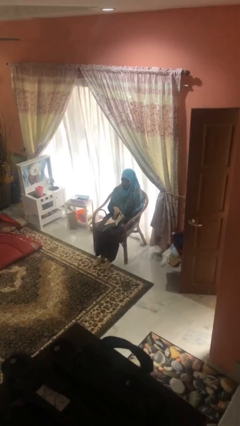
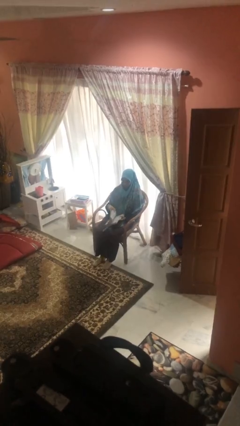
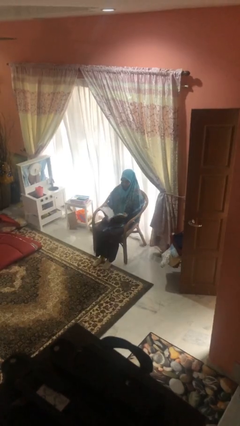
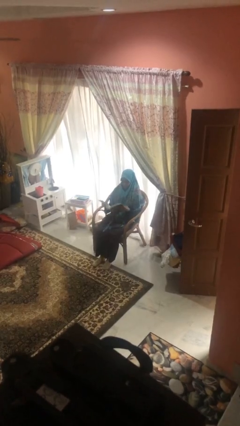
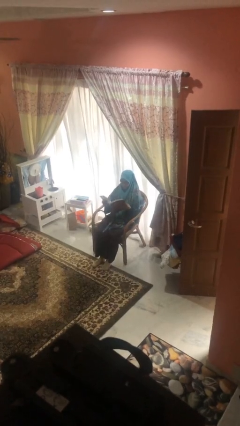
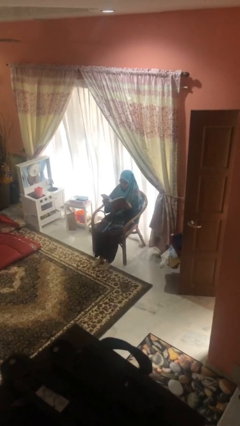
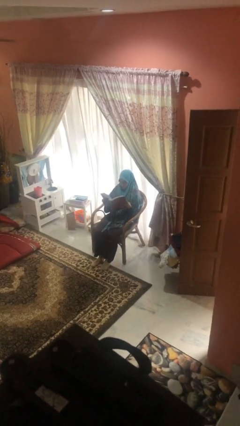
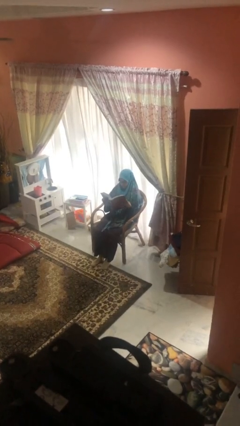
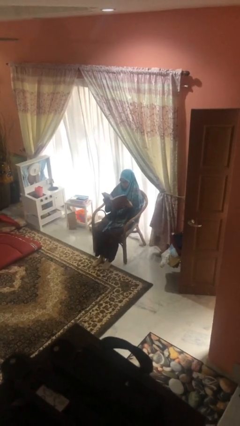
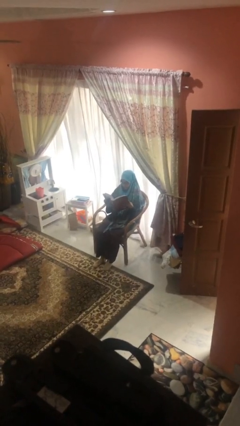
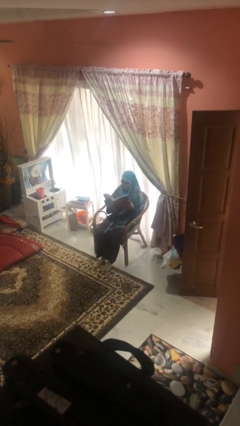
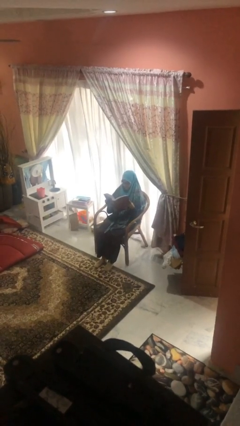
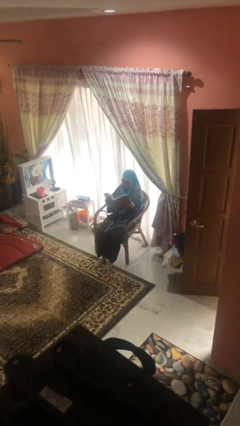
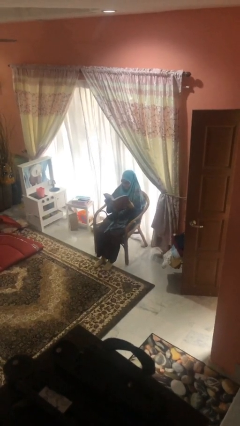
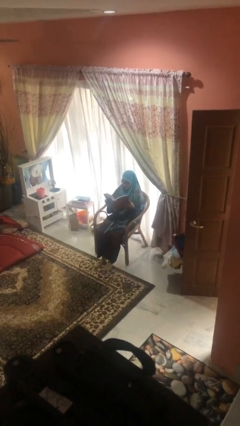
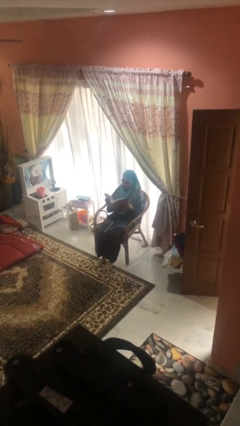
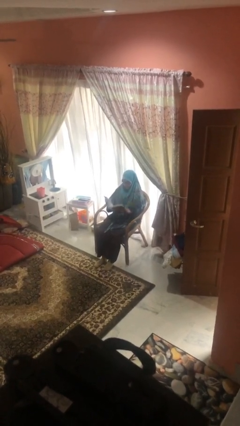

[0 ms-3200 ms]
person reads document

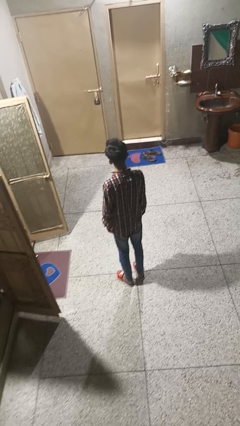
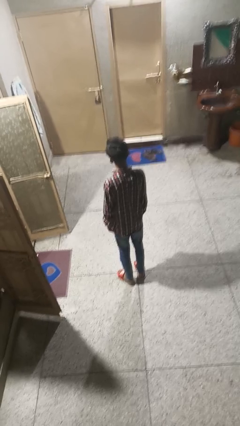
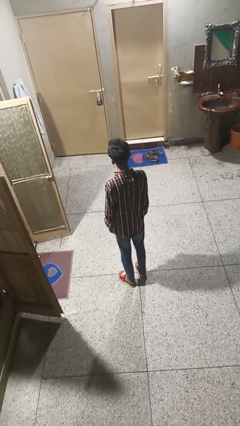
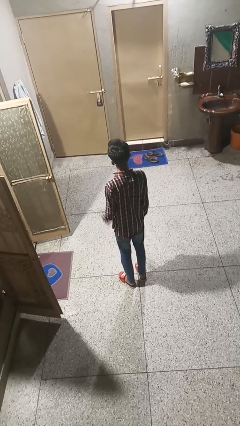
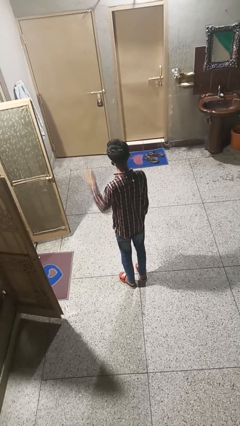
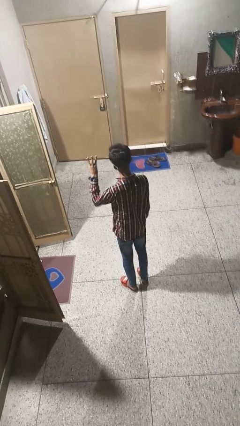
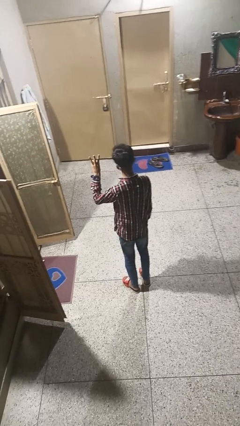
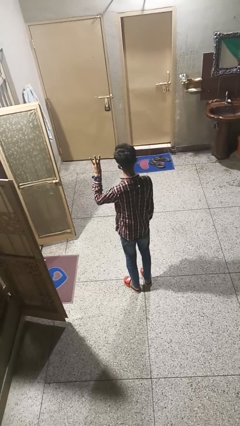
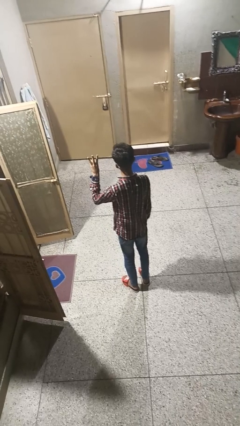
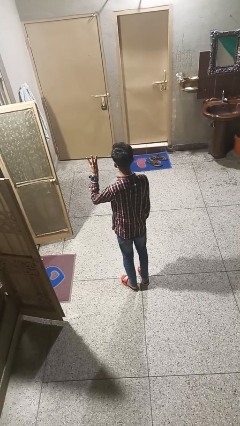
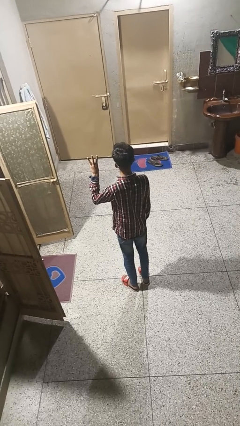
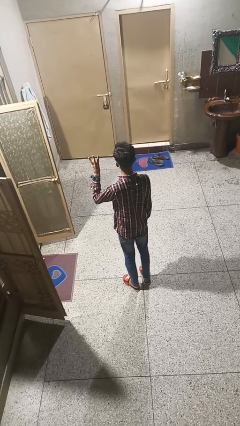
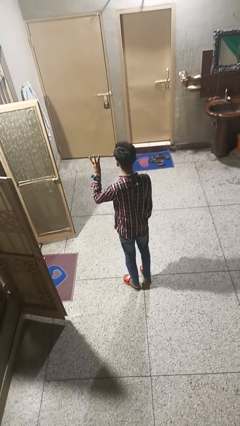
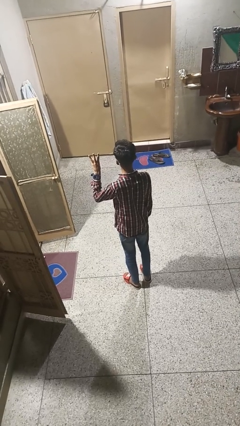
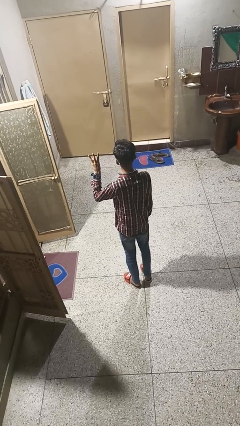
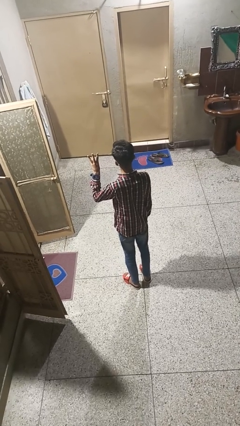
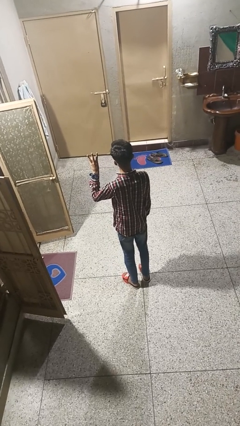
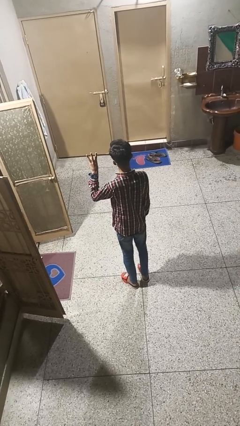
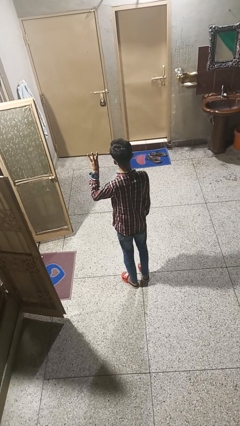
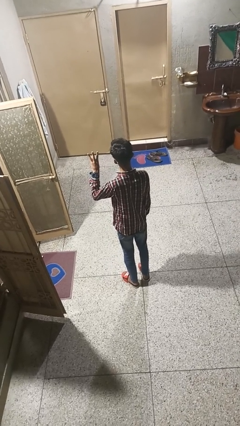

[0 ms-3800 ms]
person gestures number three

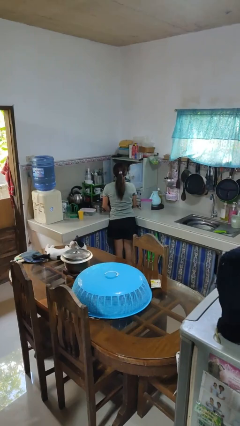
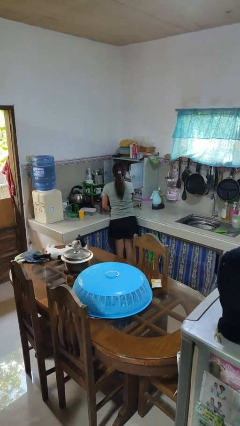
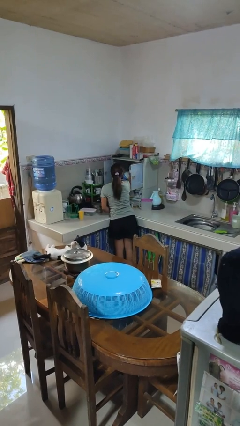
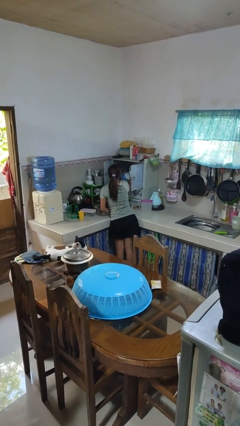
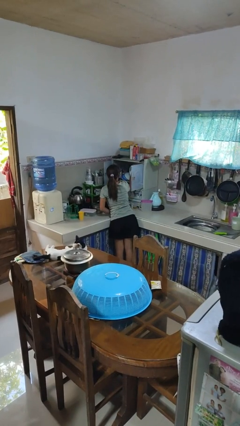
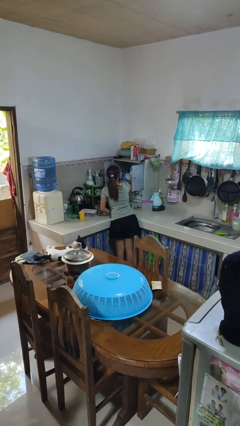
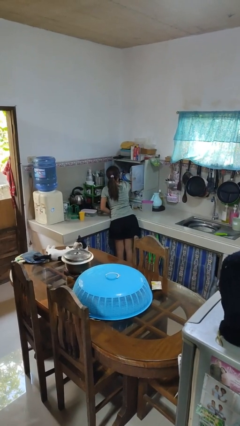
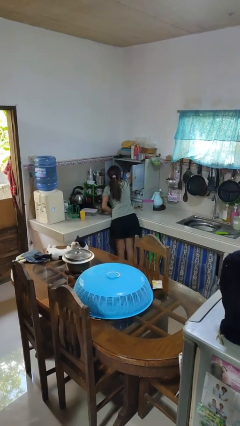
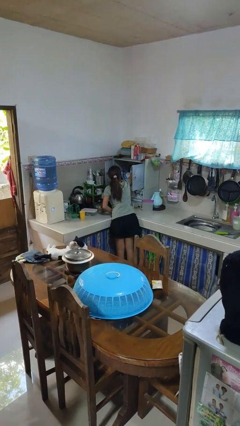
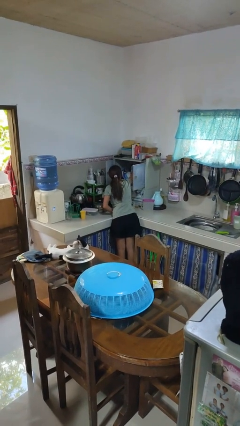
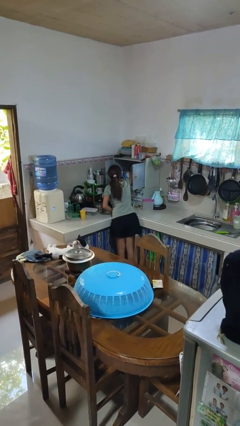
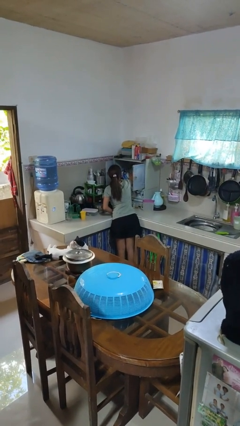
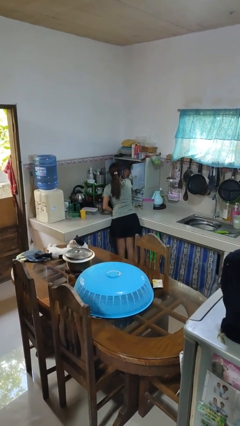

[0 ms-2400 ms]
person searches in kitchen drawer

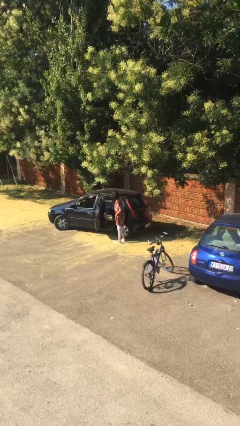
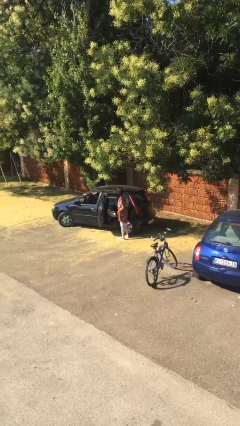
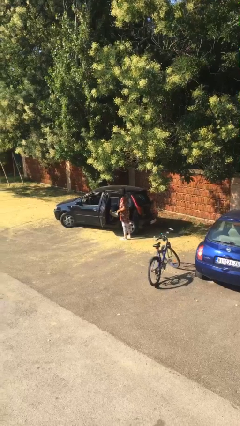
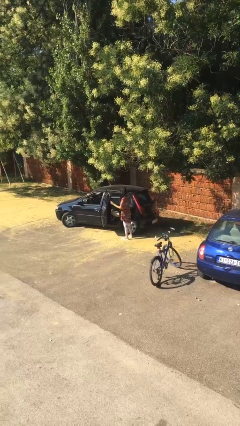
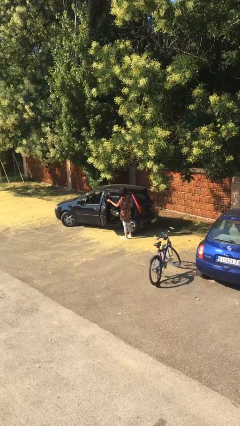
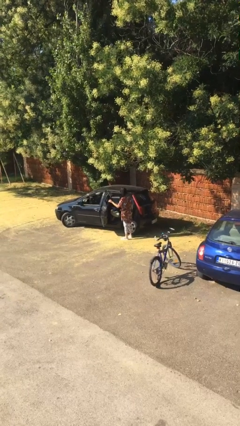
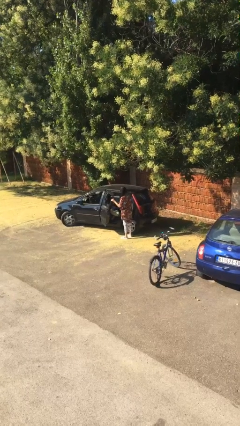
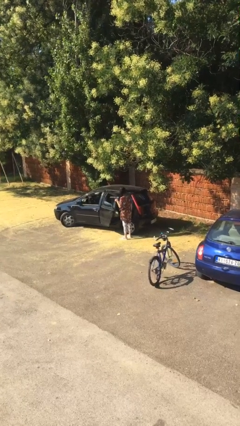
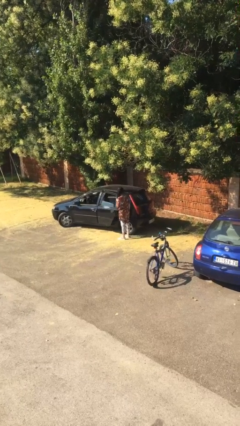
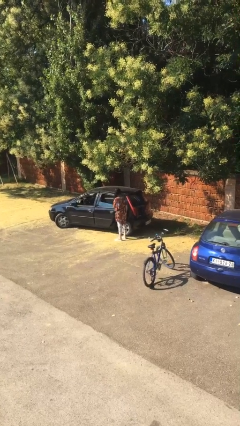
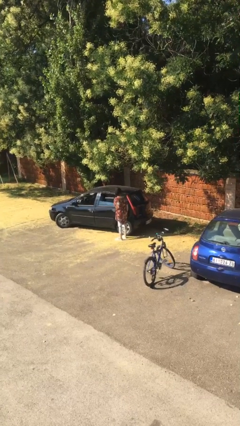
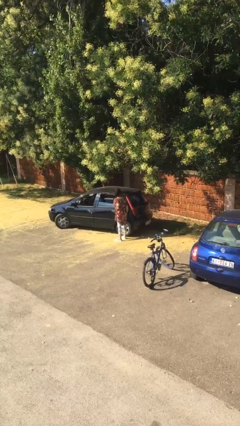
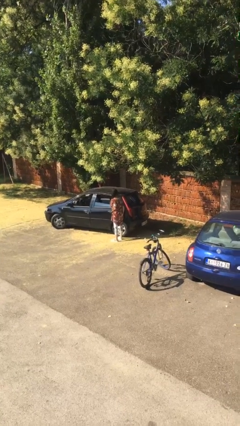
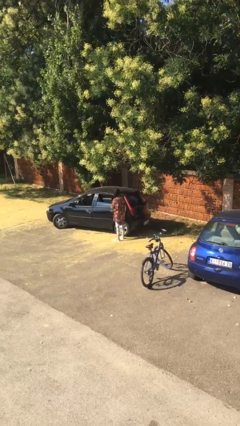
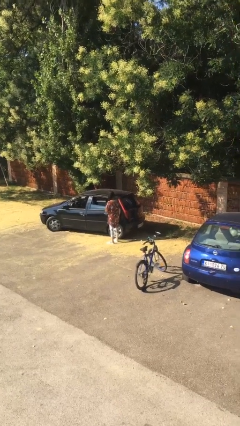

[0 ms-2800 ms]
person closes car door

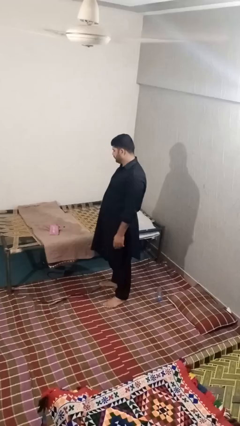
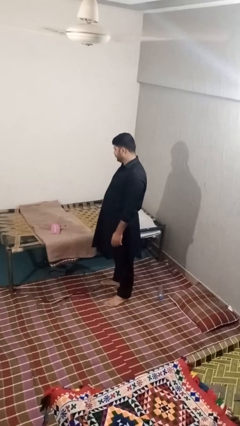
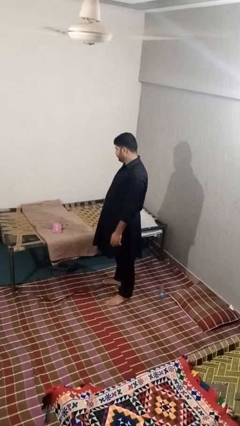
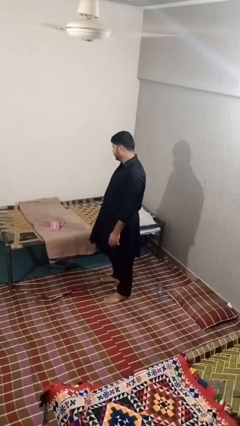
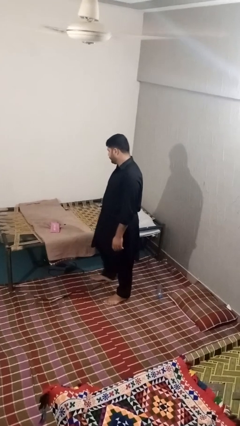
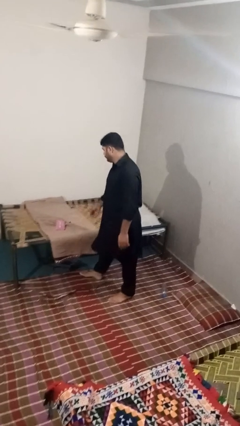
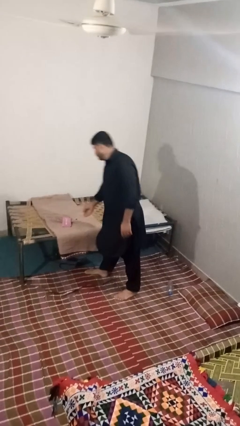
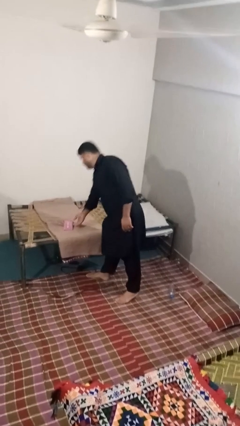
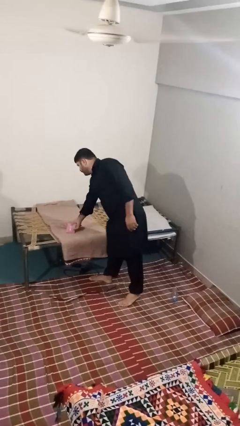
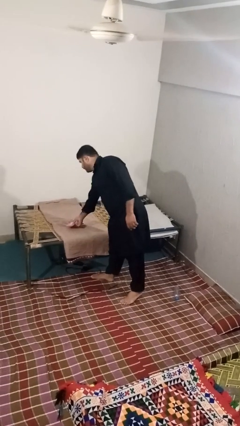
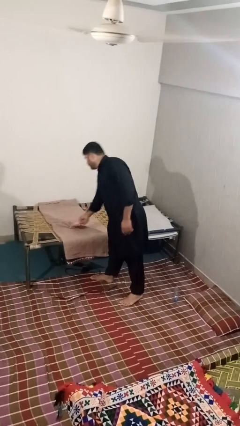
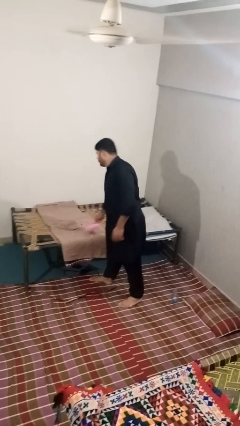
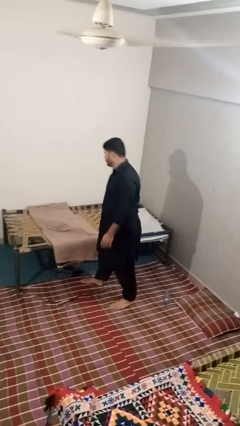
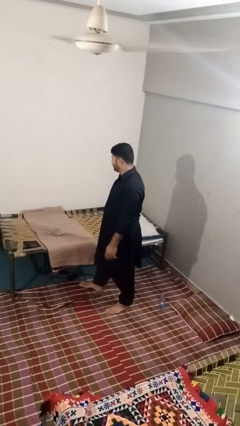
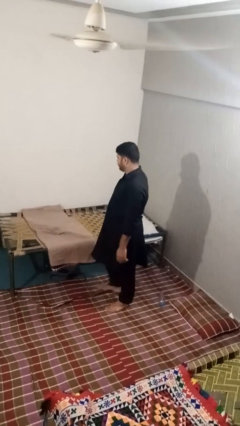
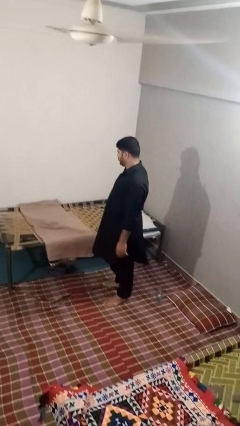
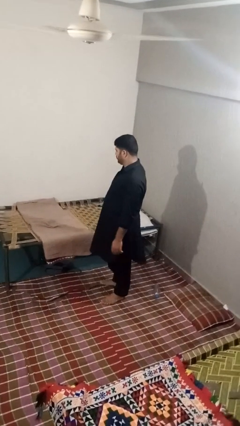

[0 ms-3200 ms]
person picks up object from bed

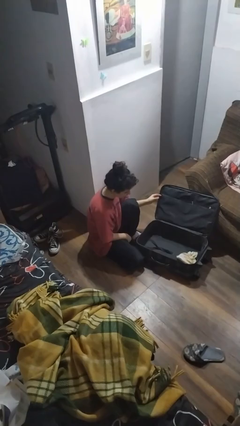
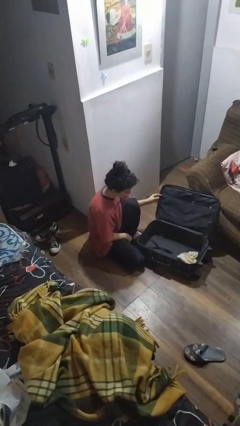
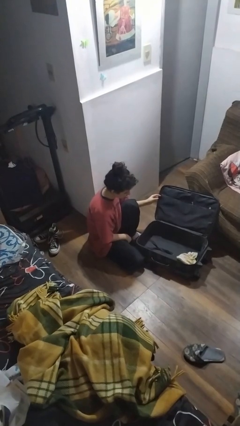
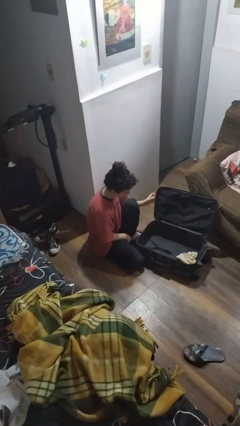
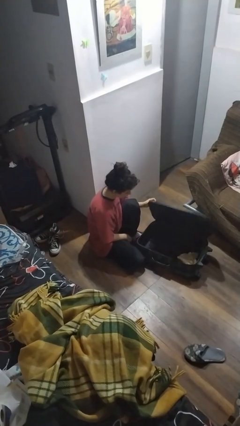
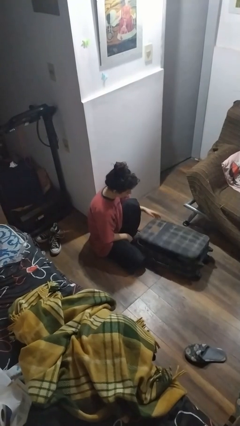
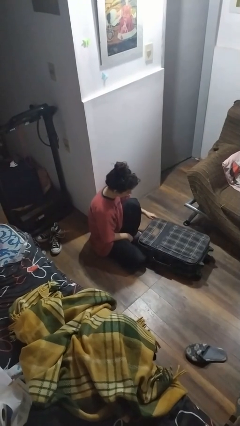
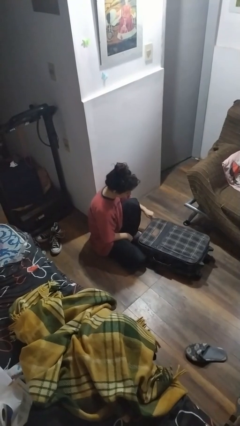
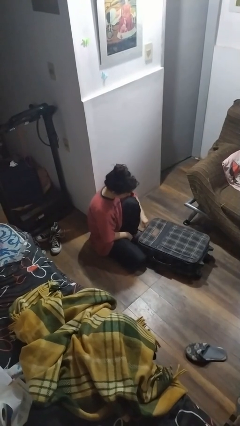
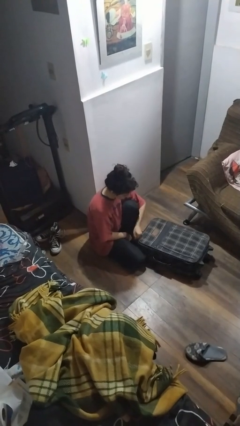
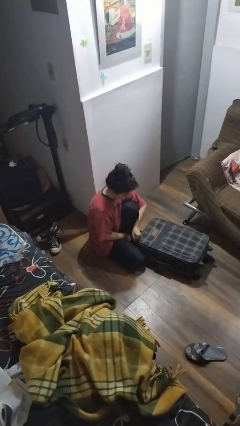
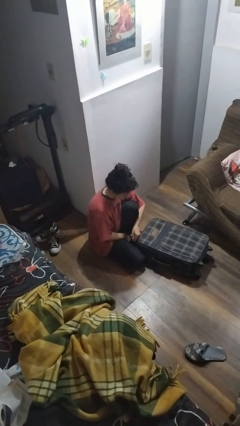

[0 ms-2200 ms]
person closes suitcase

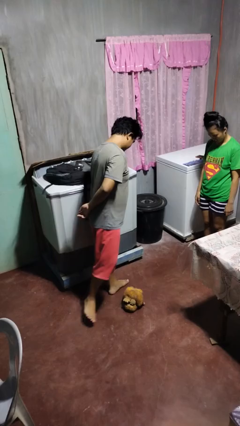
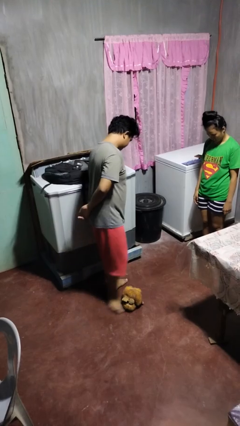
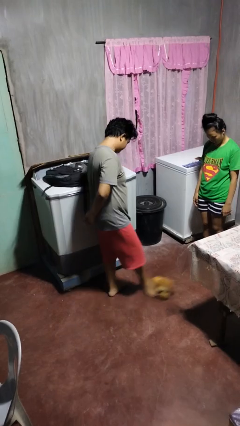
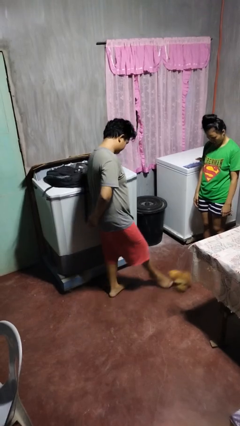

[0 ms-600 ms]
person kicks object to person
